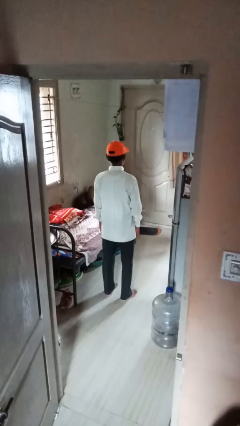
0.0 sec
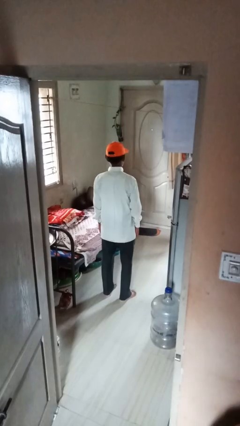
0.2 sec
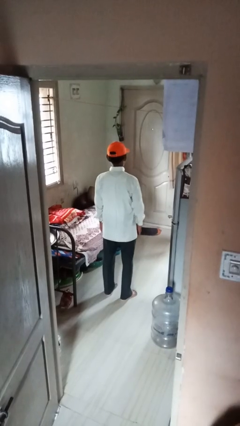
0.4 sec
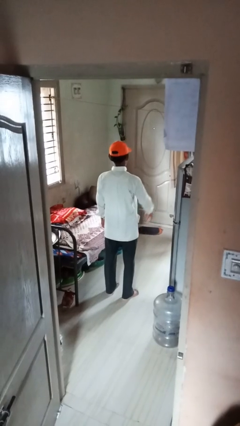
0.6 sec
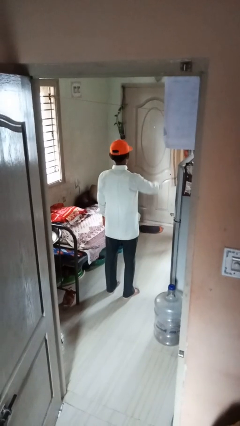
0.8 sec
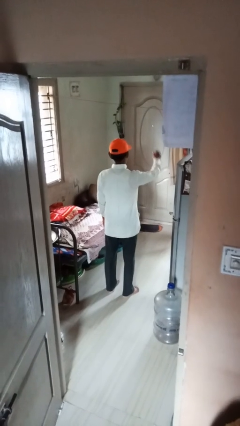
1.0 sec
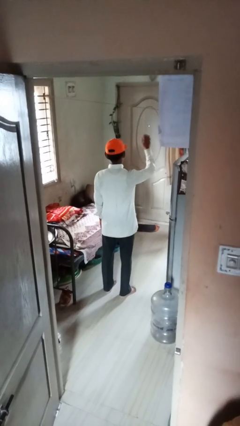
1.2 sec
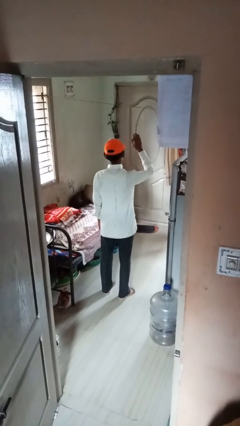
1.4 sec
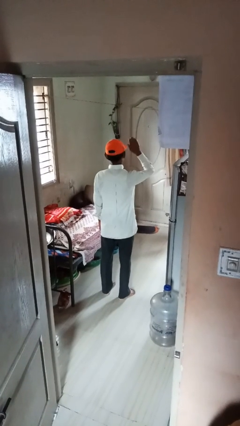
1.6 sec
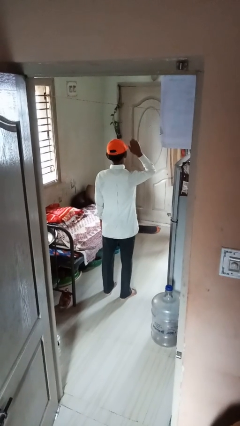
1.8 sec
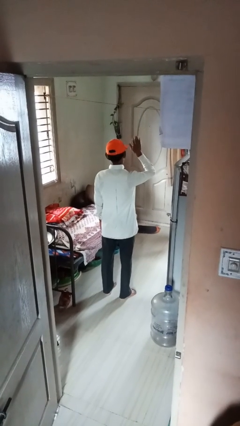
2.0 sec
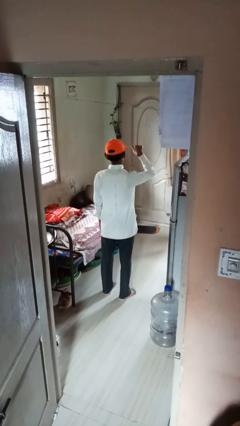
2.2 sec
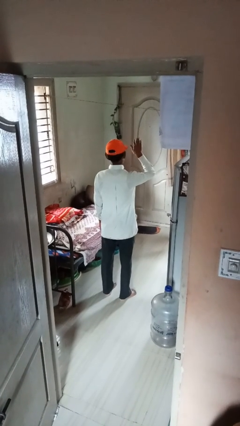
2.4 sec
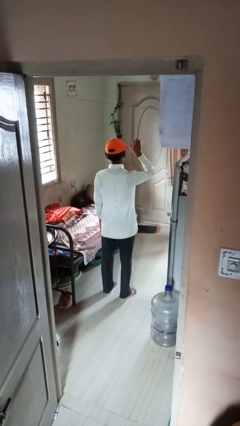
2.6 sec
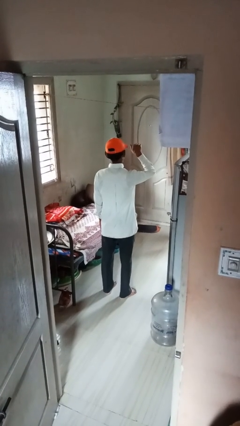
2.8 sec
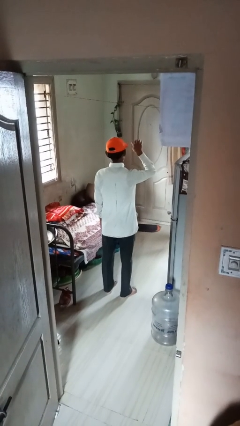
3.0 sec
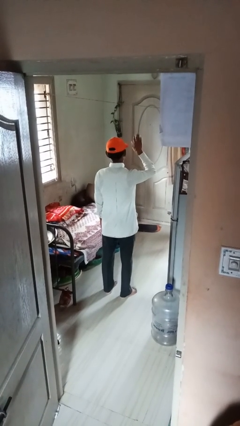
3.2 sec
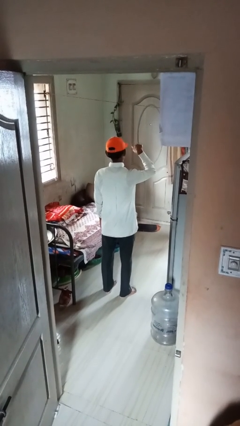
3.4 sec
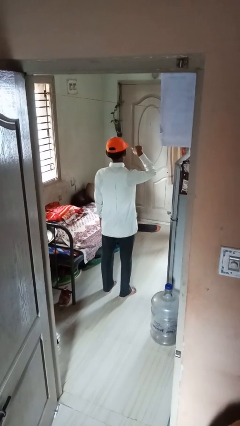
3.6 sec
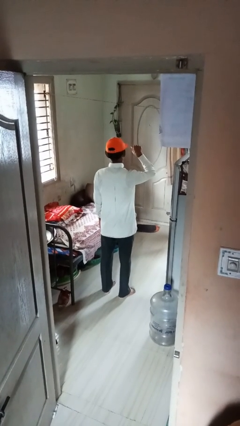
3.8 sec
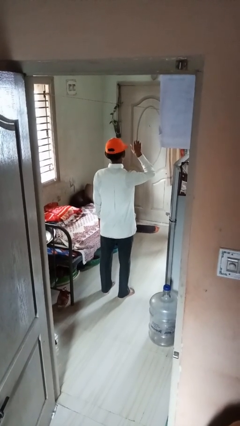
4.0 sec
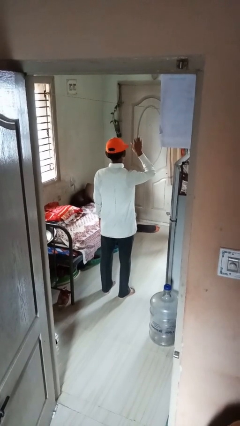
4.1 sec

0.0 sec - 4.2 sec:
person gestures come here

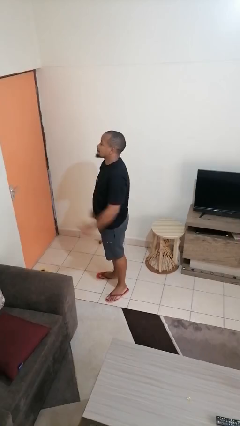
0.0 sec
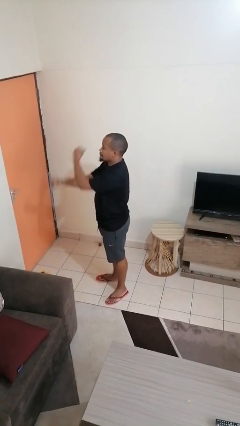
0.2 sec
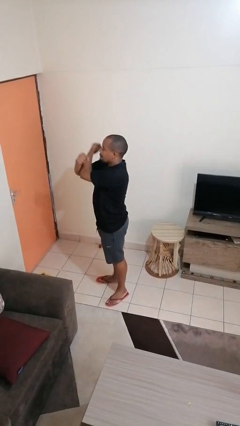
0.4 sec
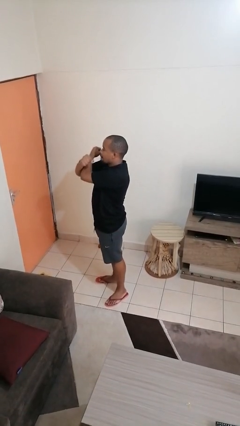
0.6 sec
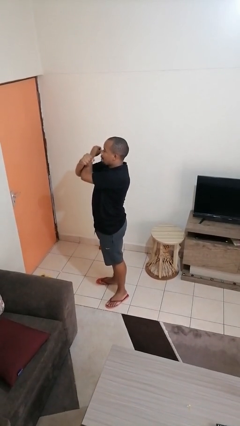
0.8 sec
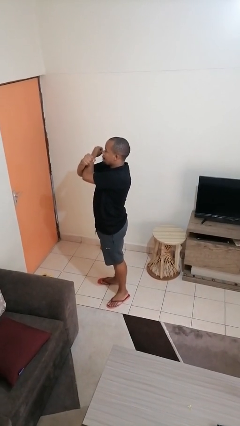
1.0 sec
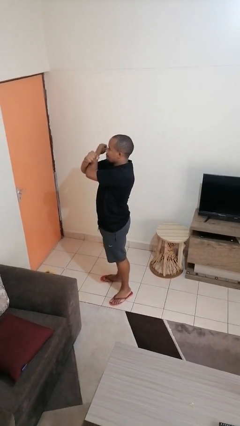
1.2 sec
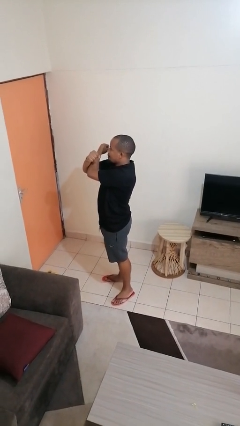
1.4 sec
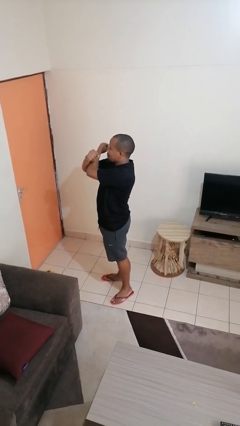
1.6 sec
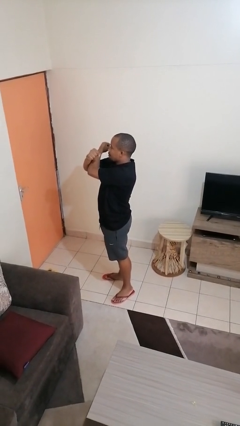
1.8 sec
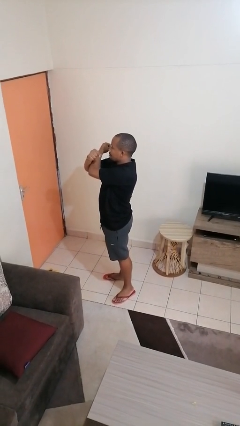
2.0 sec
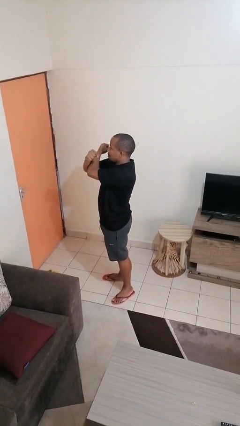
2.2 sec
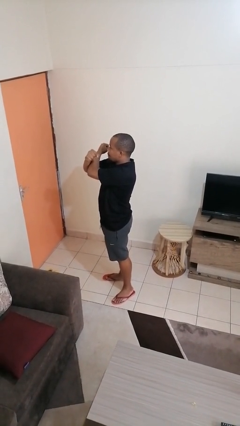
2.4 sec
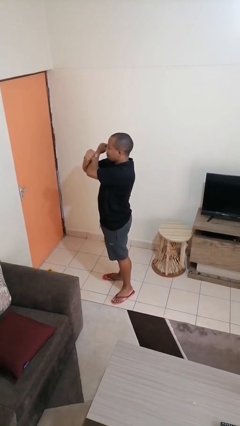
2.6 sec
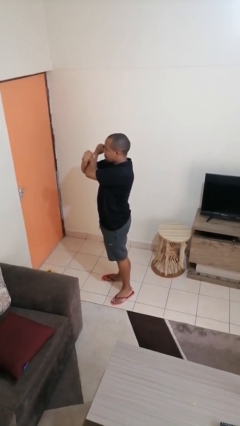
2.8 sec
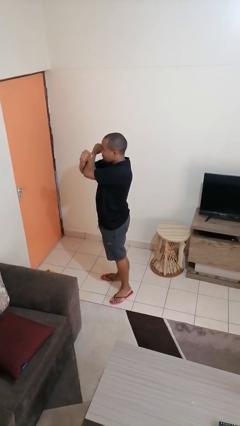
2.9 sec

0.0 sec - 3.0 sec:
person gestures arms x

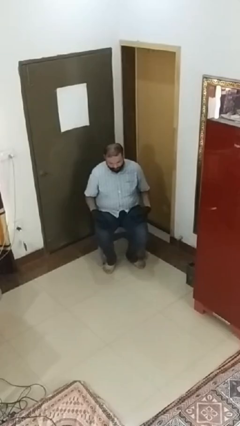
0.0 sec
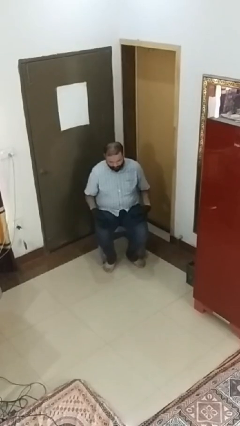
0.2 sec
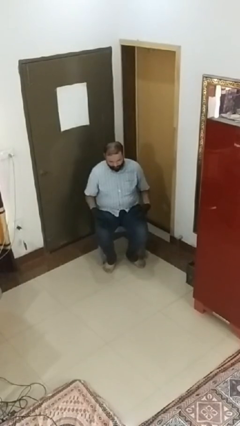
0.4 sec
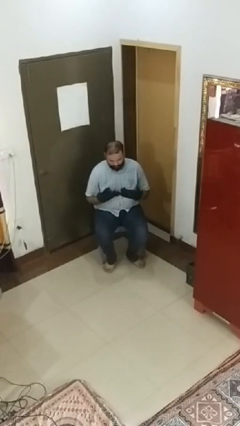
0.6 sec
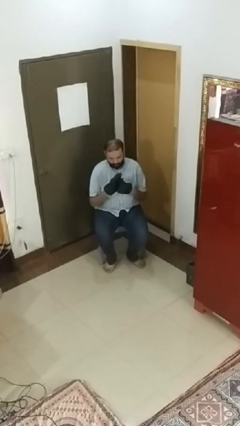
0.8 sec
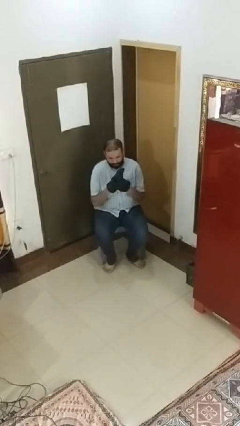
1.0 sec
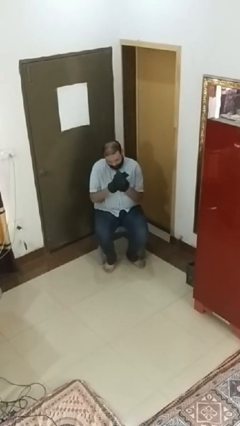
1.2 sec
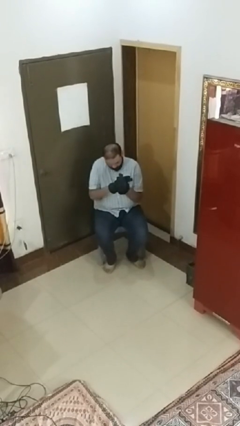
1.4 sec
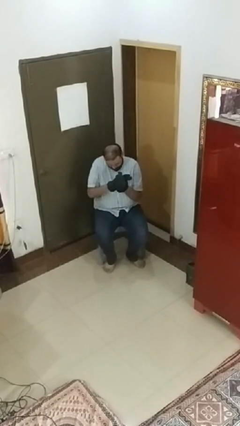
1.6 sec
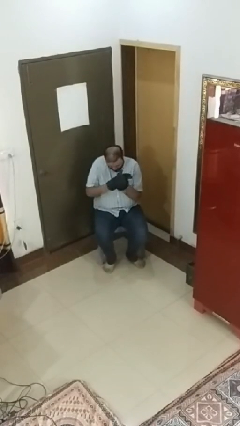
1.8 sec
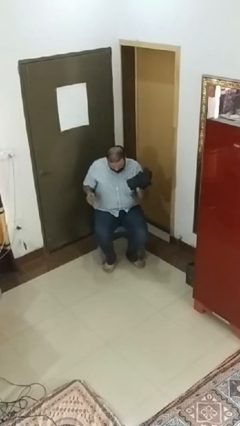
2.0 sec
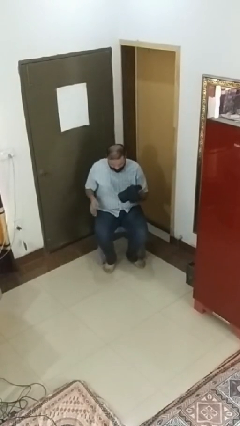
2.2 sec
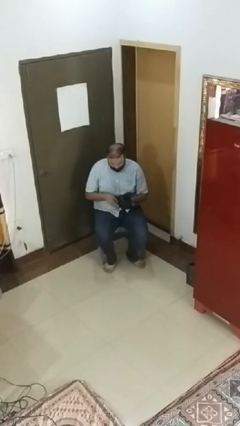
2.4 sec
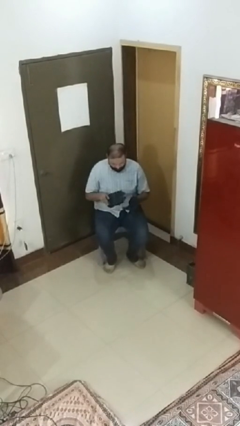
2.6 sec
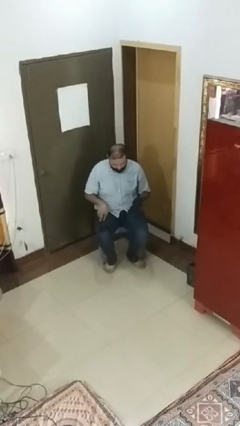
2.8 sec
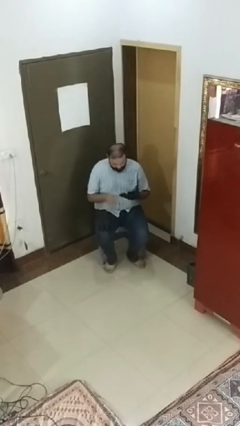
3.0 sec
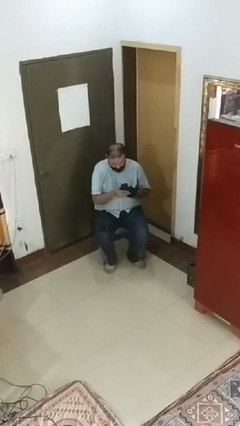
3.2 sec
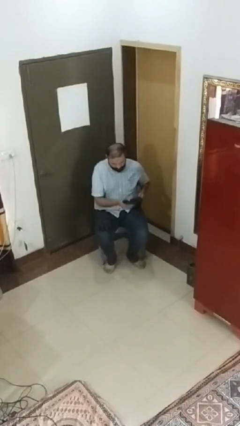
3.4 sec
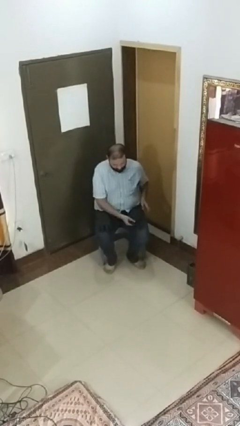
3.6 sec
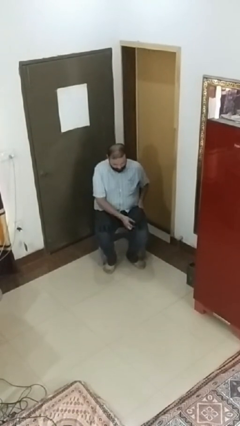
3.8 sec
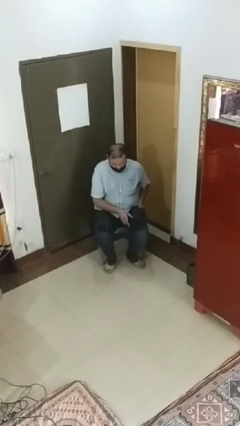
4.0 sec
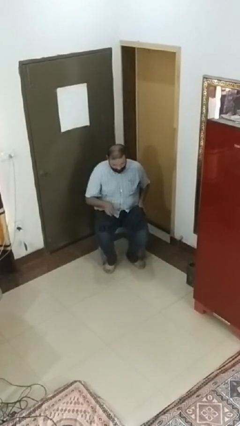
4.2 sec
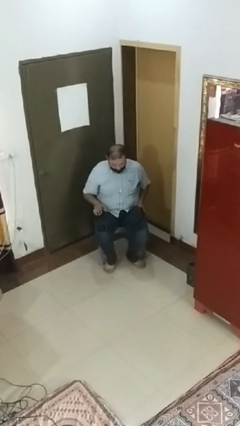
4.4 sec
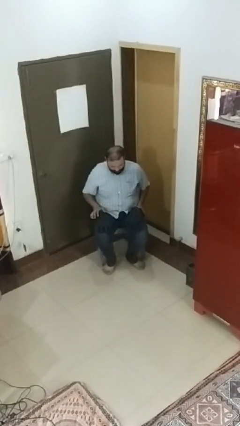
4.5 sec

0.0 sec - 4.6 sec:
person takes off gloves

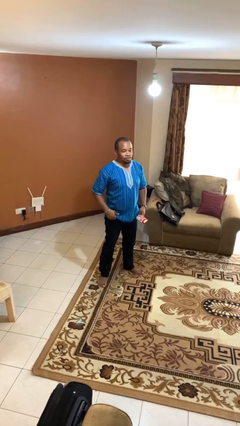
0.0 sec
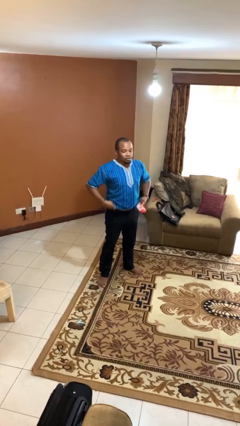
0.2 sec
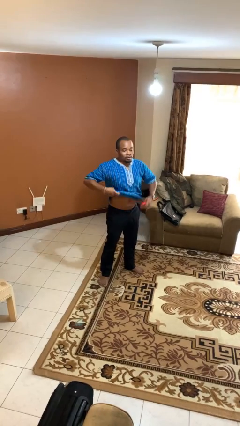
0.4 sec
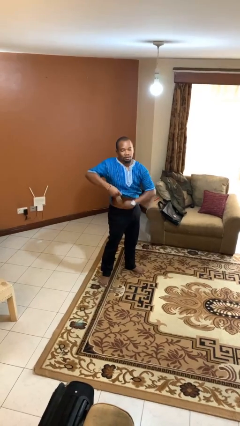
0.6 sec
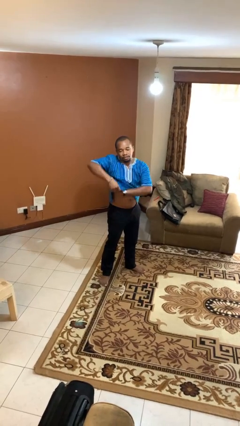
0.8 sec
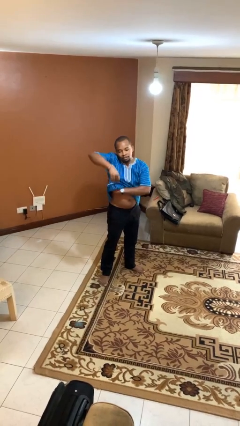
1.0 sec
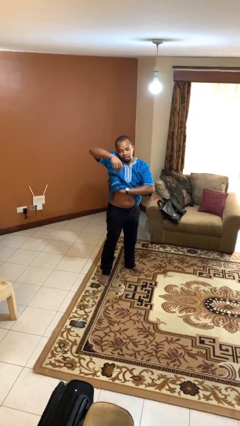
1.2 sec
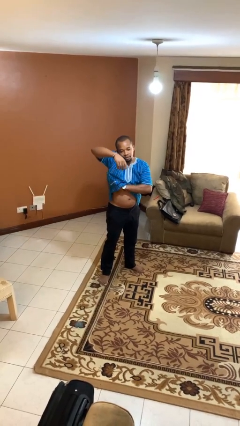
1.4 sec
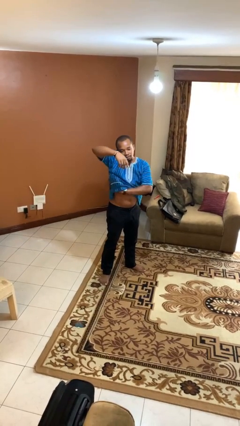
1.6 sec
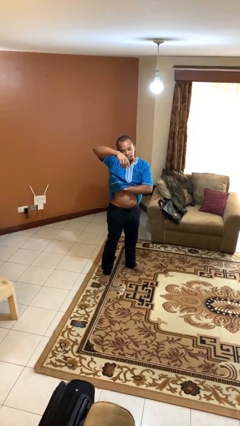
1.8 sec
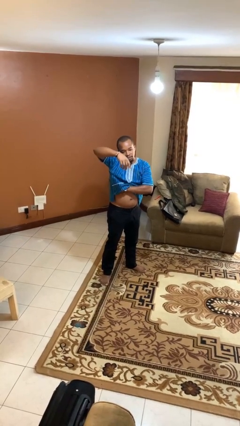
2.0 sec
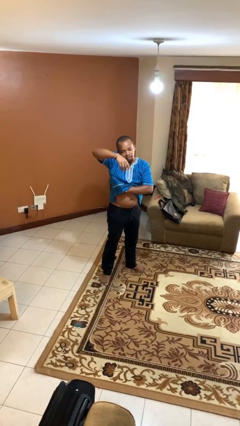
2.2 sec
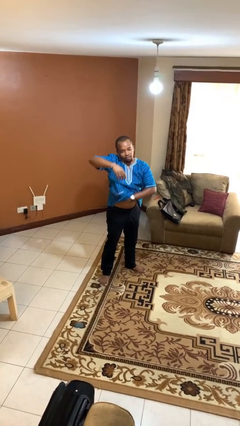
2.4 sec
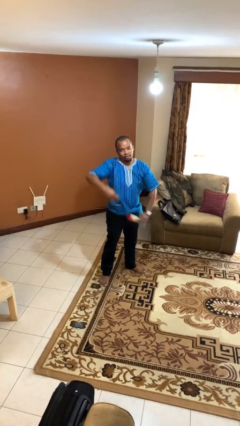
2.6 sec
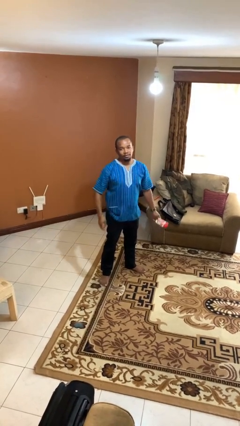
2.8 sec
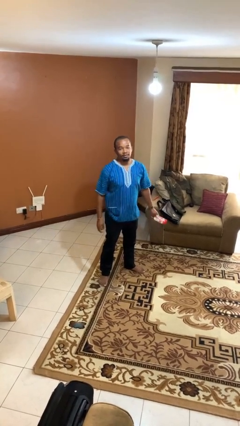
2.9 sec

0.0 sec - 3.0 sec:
person applies deodorant

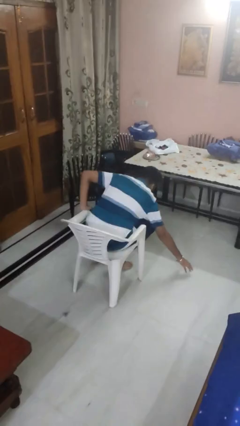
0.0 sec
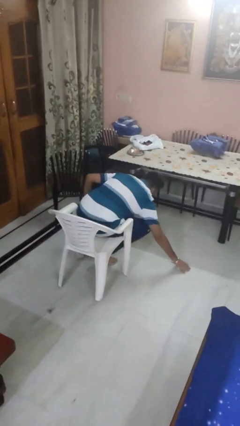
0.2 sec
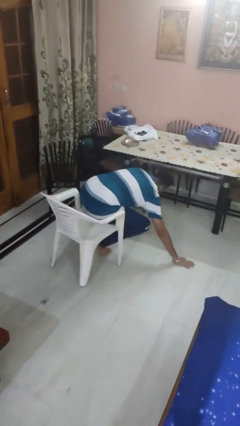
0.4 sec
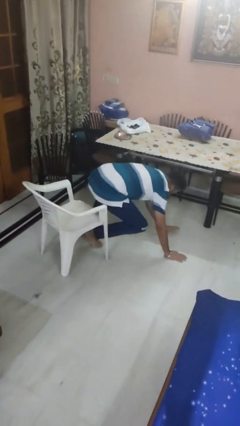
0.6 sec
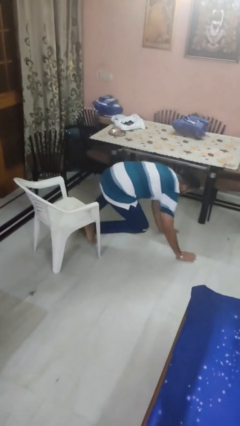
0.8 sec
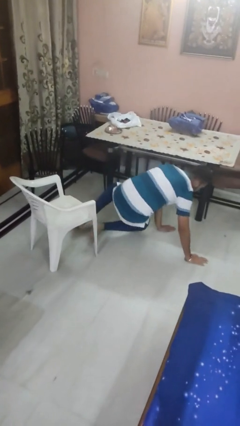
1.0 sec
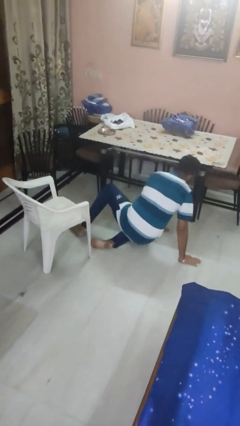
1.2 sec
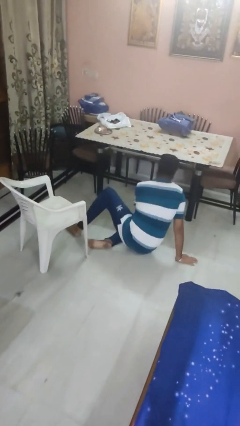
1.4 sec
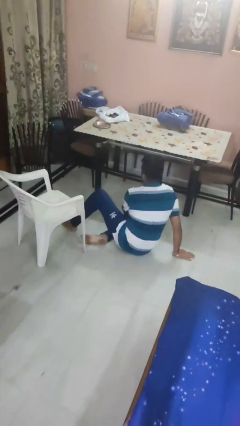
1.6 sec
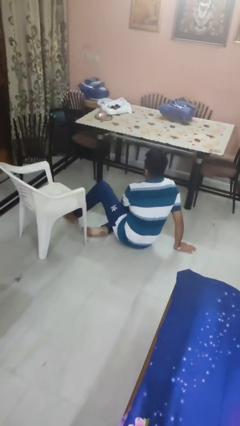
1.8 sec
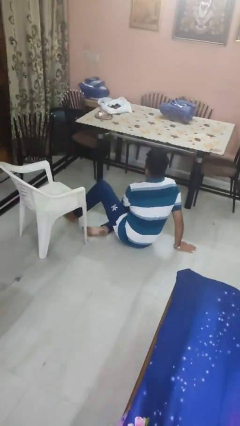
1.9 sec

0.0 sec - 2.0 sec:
person falls from chair

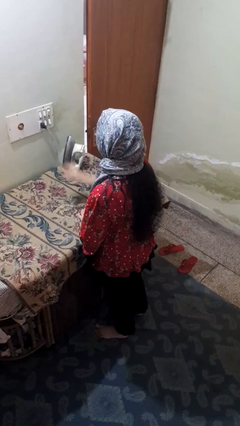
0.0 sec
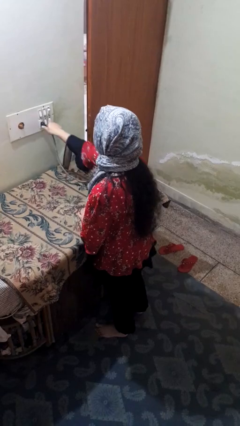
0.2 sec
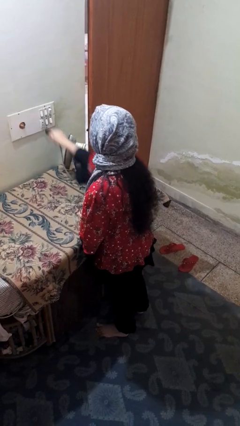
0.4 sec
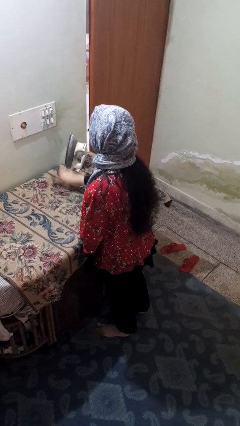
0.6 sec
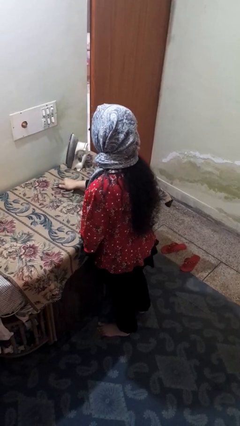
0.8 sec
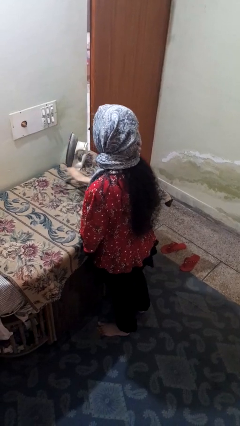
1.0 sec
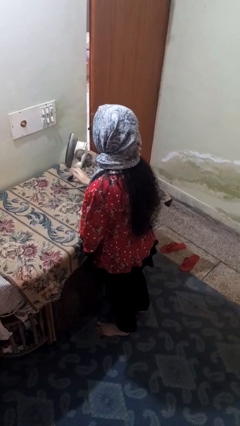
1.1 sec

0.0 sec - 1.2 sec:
person unplugs from electrical socket
